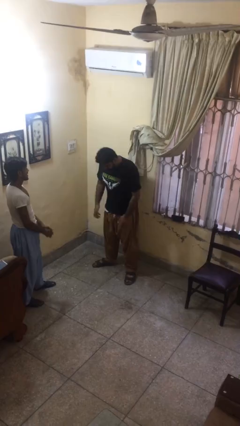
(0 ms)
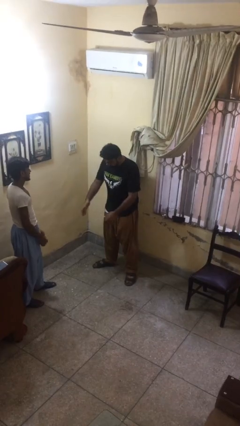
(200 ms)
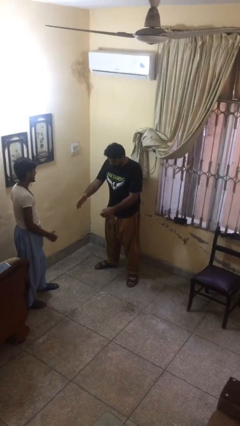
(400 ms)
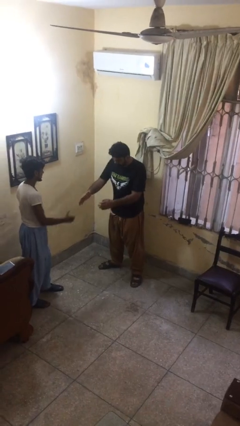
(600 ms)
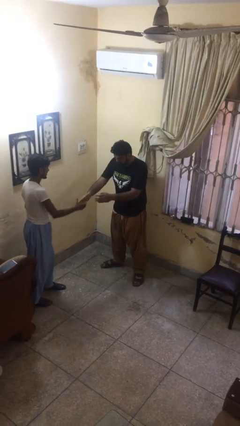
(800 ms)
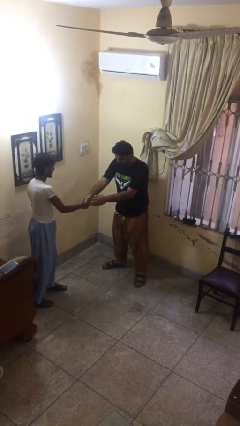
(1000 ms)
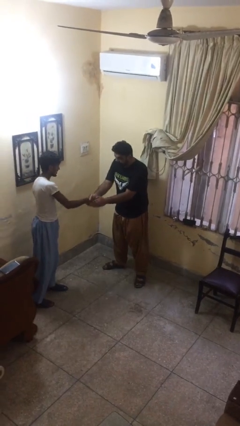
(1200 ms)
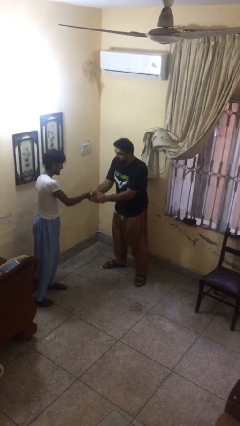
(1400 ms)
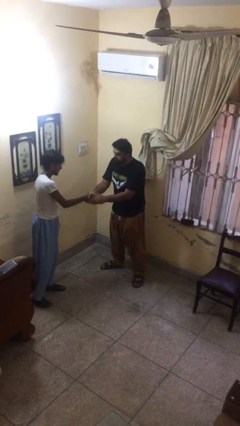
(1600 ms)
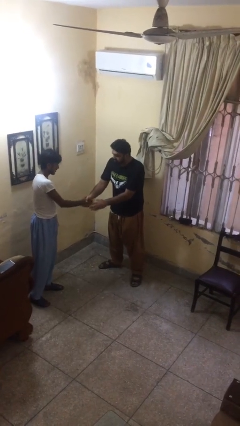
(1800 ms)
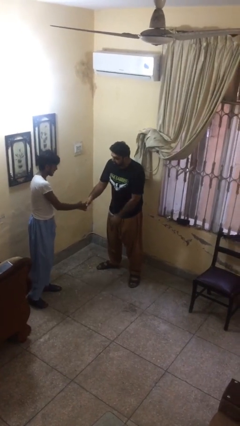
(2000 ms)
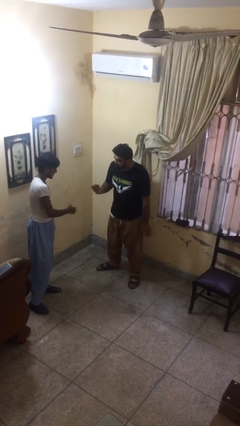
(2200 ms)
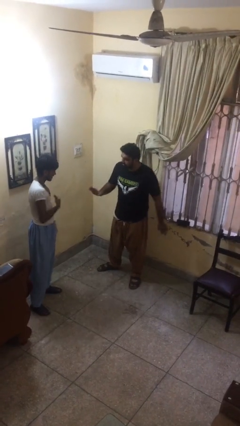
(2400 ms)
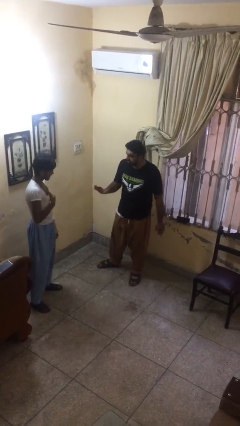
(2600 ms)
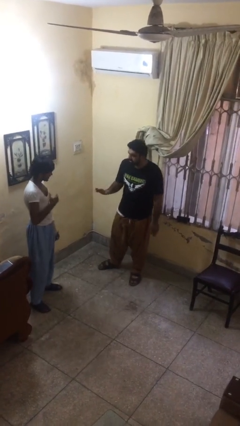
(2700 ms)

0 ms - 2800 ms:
person shakes hand

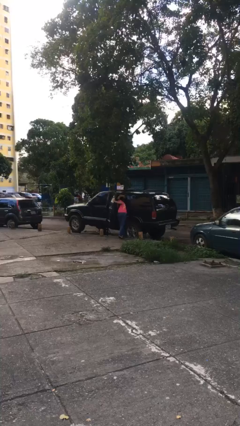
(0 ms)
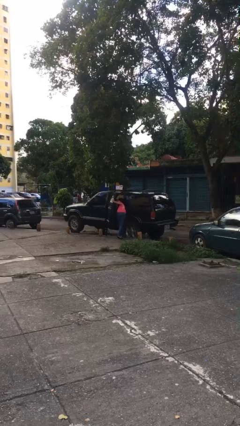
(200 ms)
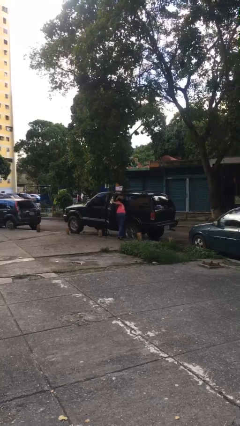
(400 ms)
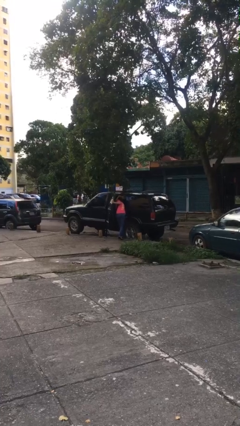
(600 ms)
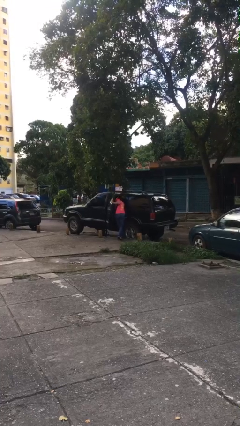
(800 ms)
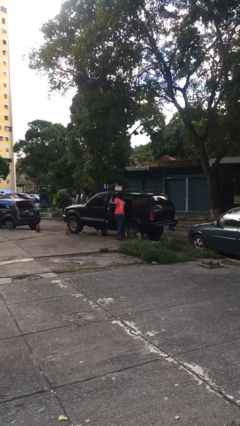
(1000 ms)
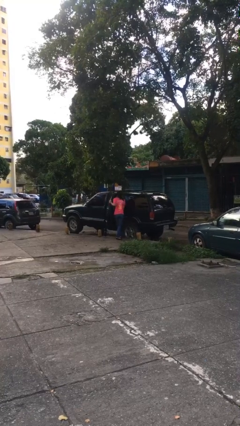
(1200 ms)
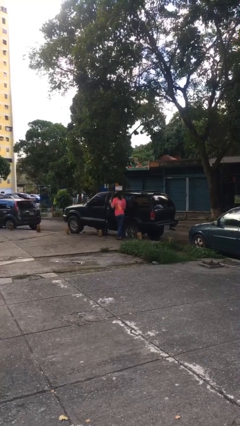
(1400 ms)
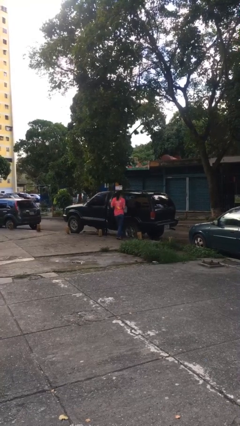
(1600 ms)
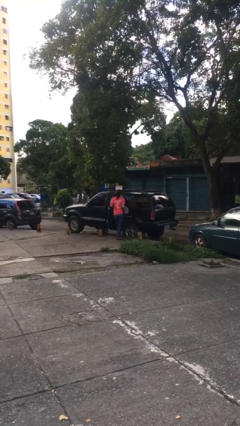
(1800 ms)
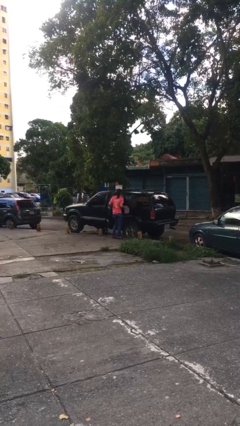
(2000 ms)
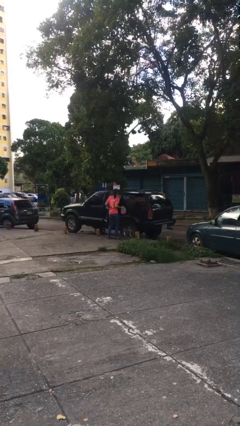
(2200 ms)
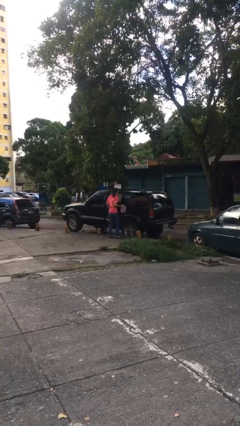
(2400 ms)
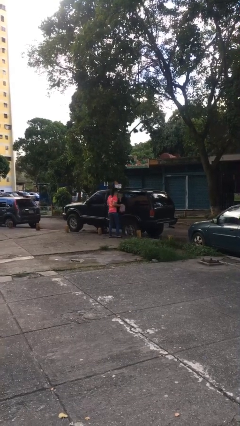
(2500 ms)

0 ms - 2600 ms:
person unloads car

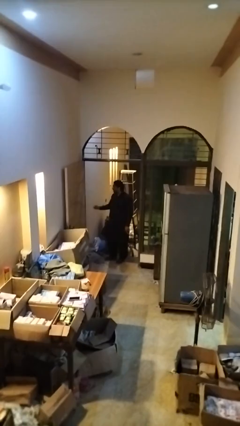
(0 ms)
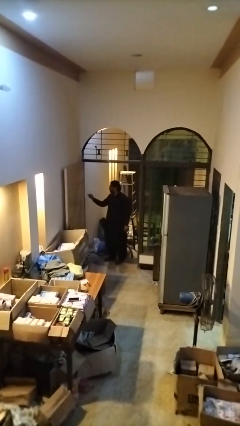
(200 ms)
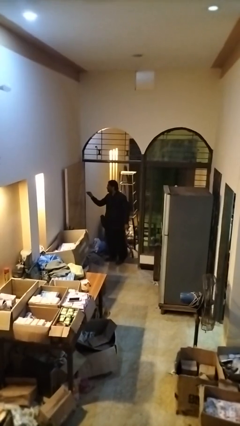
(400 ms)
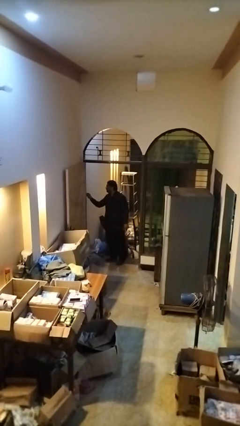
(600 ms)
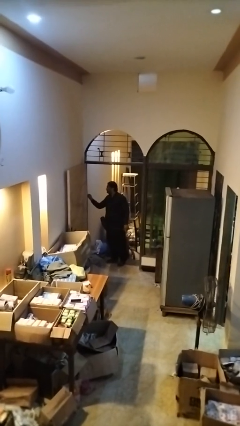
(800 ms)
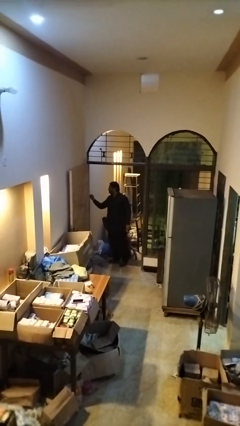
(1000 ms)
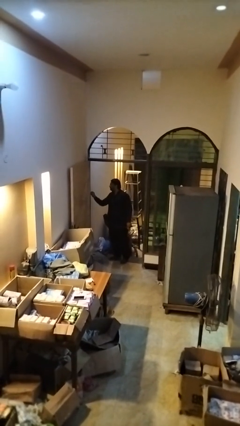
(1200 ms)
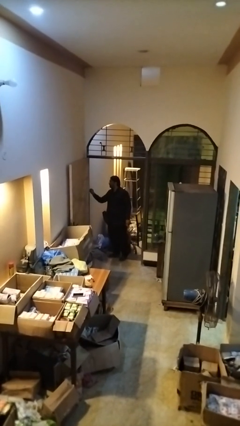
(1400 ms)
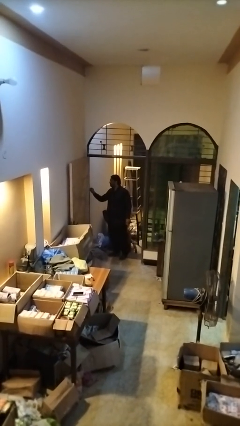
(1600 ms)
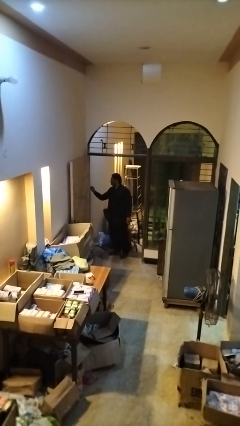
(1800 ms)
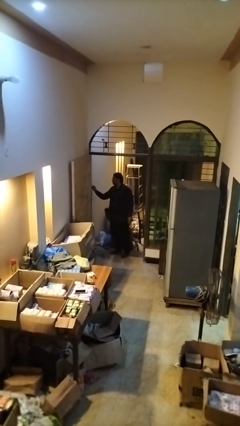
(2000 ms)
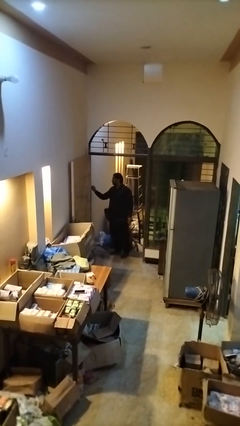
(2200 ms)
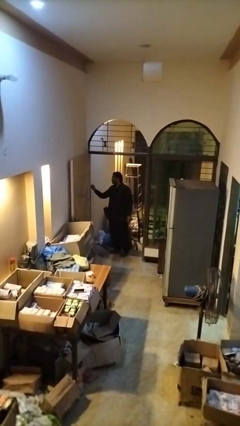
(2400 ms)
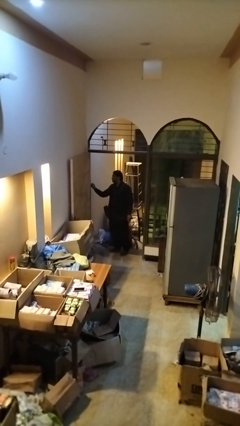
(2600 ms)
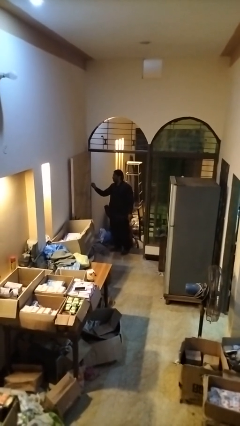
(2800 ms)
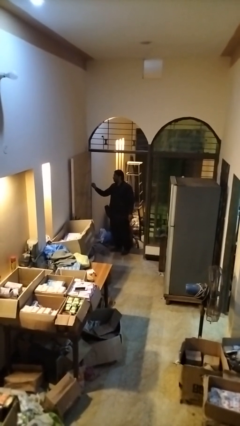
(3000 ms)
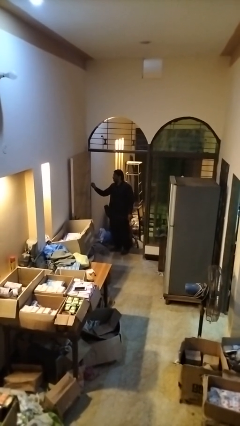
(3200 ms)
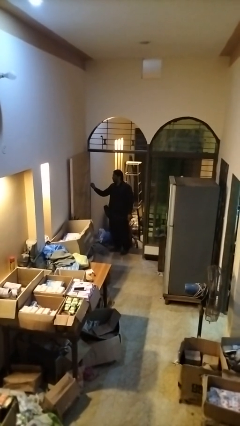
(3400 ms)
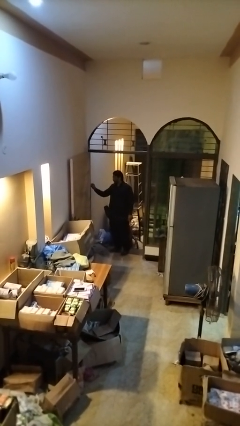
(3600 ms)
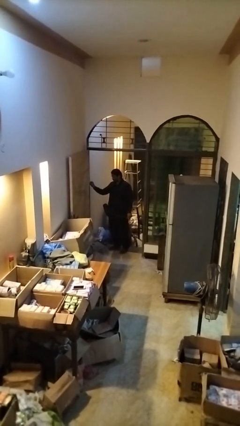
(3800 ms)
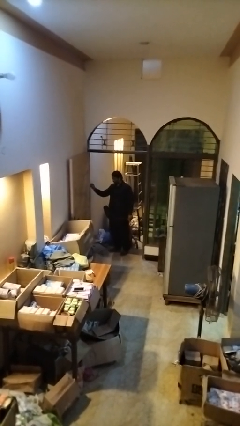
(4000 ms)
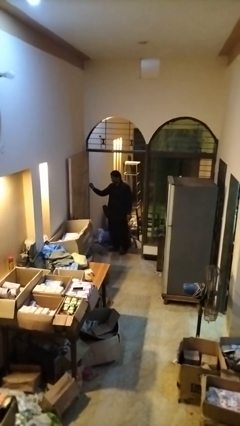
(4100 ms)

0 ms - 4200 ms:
person plugs into electrical socket

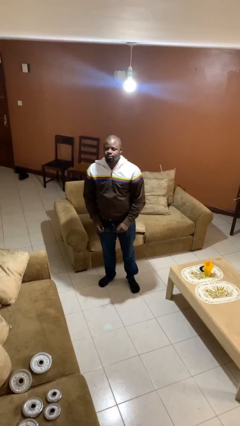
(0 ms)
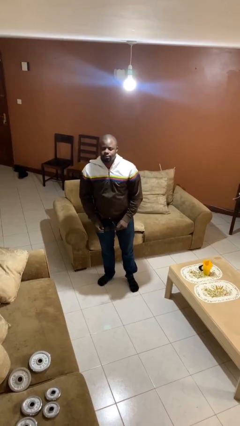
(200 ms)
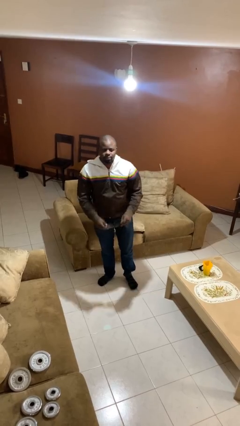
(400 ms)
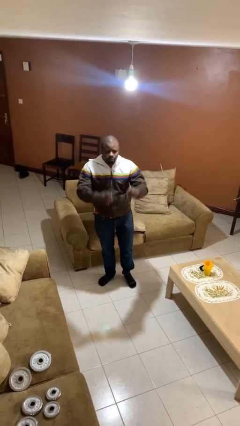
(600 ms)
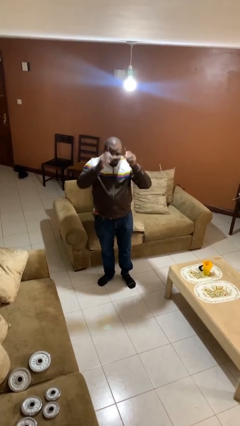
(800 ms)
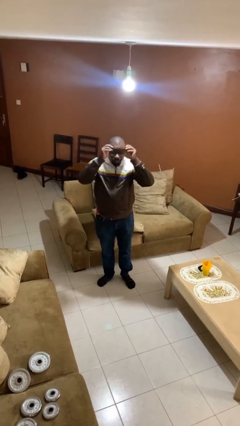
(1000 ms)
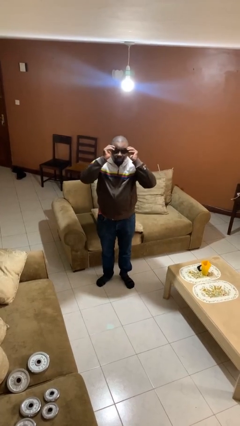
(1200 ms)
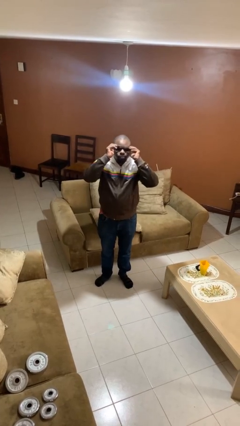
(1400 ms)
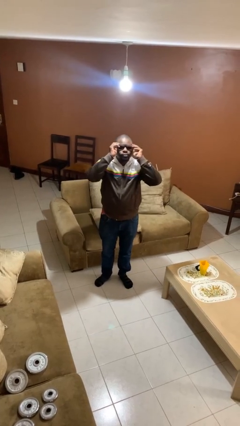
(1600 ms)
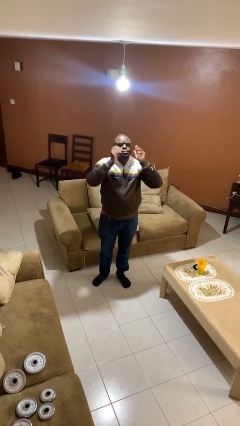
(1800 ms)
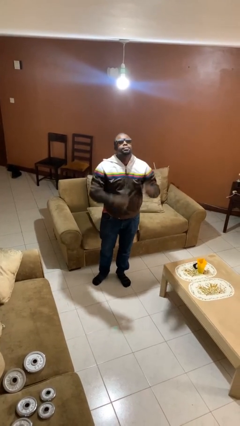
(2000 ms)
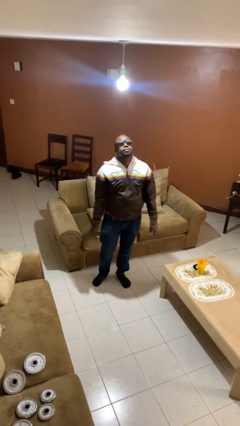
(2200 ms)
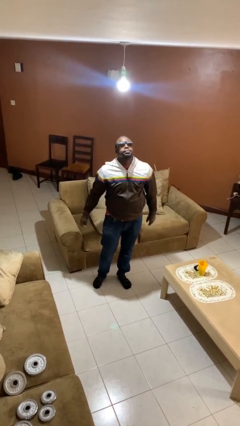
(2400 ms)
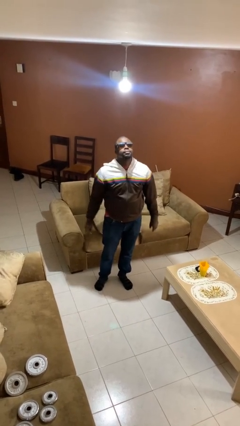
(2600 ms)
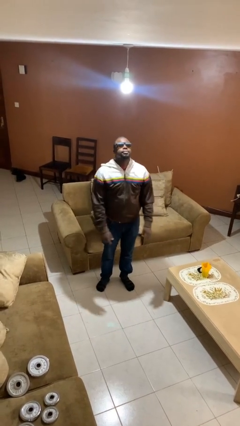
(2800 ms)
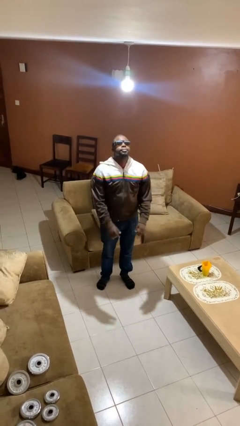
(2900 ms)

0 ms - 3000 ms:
person puts on sunglasses

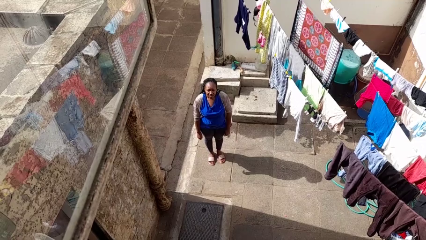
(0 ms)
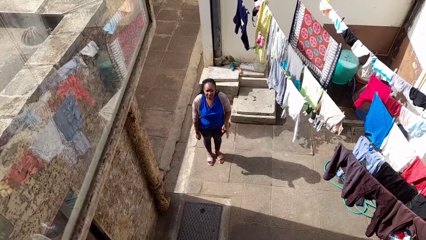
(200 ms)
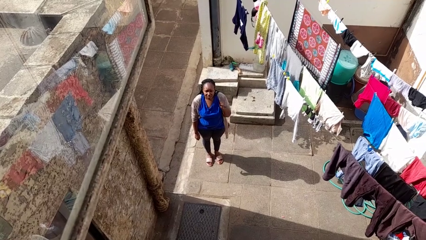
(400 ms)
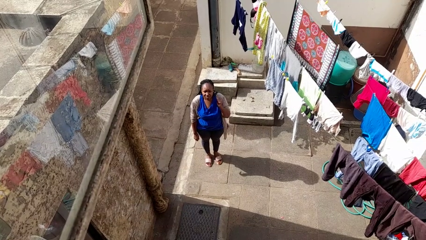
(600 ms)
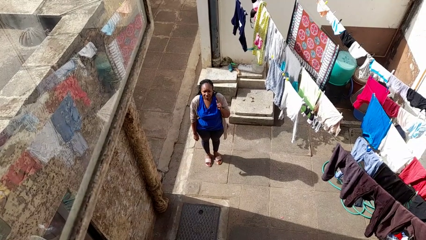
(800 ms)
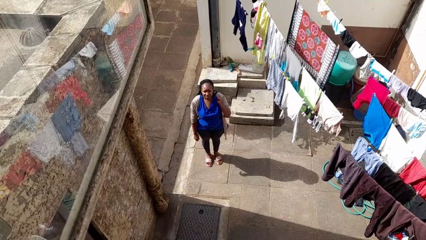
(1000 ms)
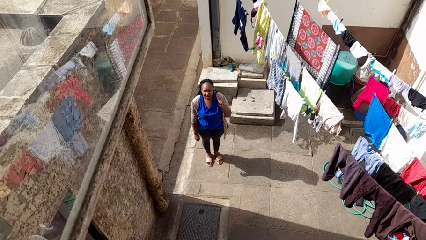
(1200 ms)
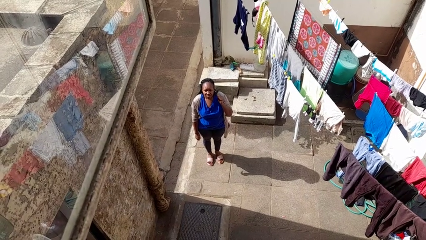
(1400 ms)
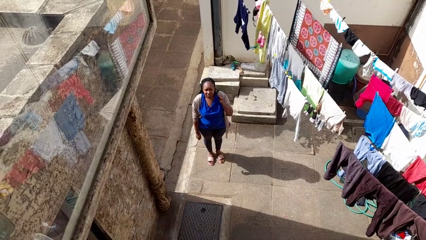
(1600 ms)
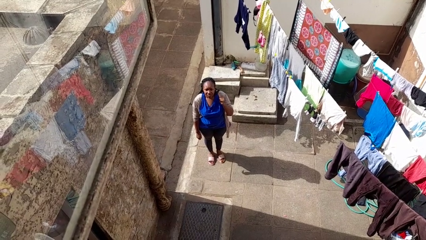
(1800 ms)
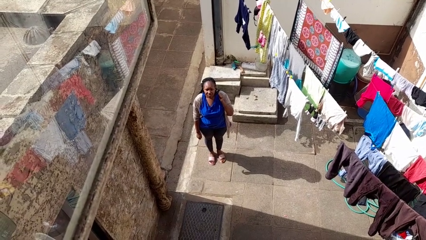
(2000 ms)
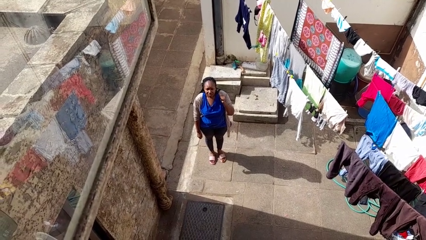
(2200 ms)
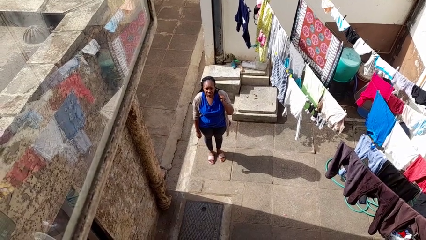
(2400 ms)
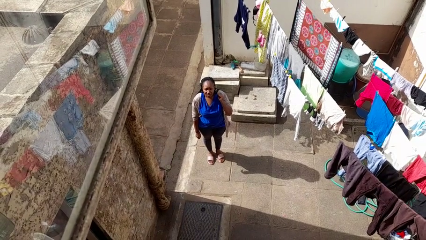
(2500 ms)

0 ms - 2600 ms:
person gestures behind me

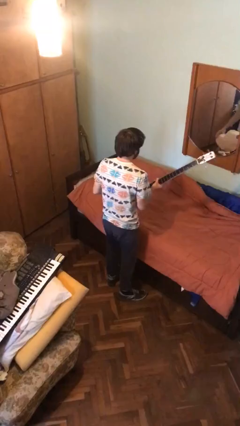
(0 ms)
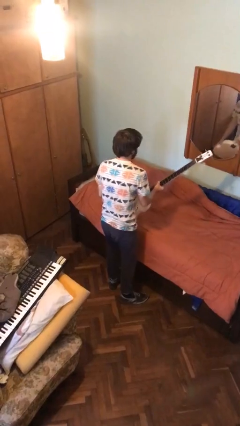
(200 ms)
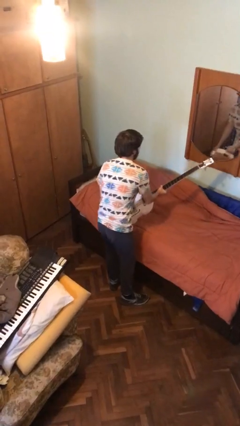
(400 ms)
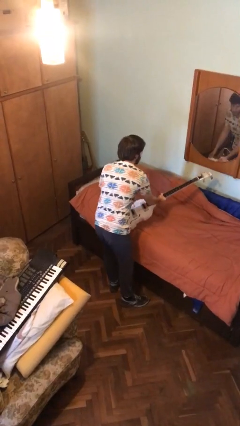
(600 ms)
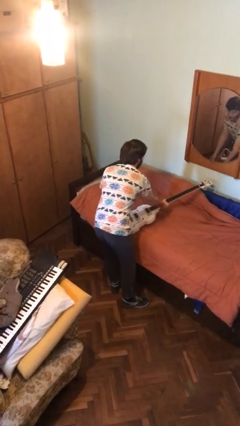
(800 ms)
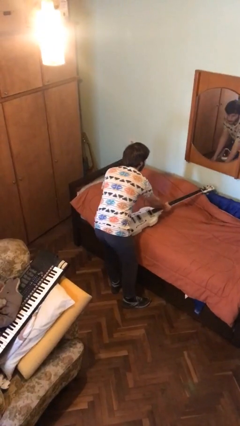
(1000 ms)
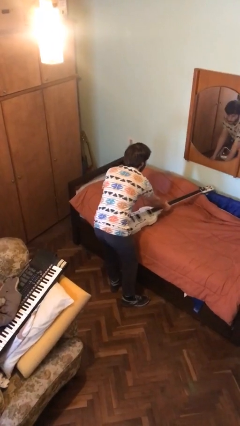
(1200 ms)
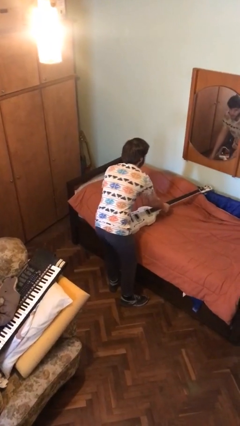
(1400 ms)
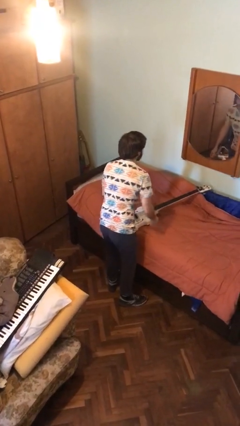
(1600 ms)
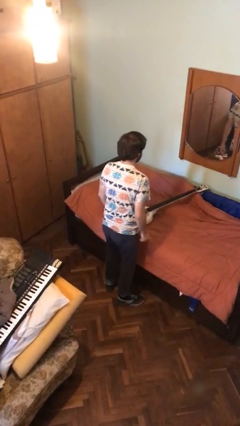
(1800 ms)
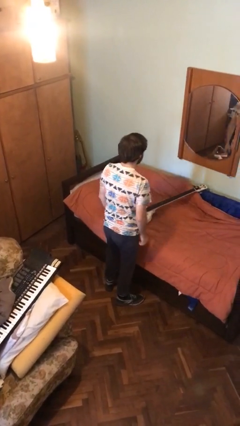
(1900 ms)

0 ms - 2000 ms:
person puts down object on bed

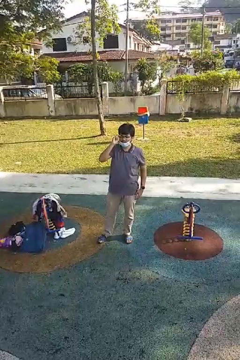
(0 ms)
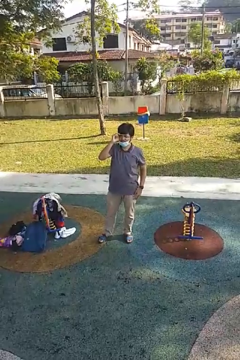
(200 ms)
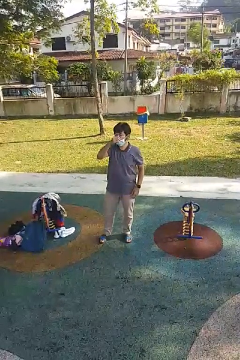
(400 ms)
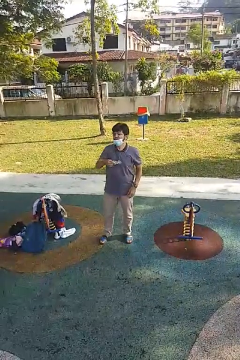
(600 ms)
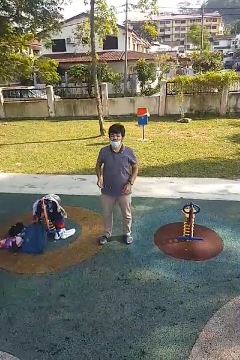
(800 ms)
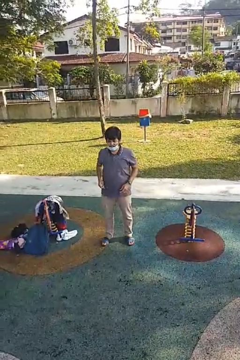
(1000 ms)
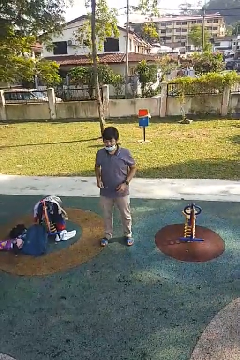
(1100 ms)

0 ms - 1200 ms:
person takes off glasses
